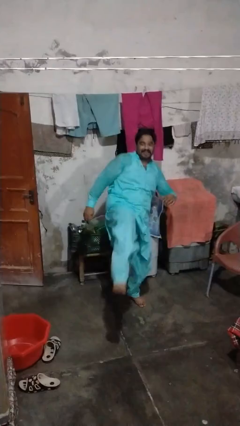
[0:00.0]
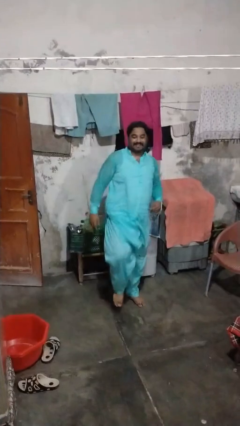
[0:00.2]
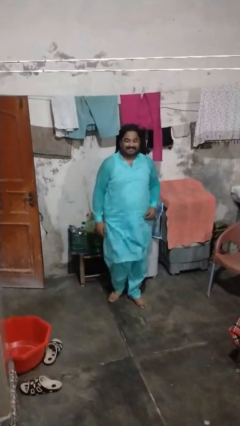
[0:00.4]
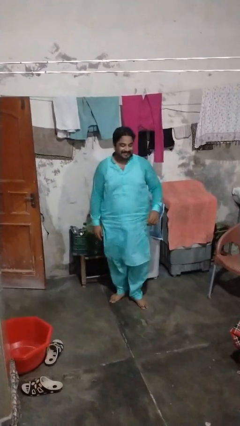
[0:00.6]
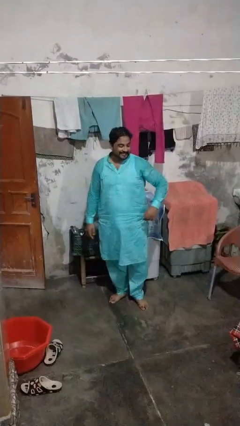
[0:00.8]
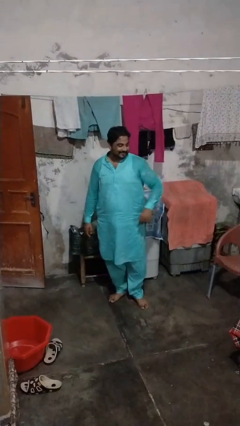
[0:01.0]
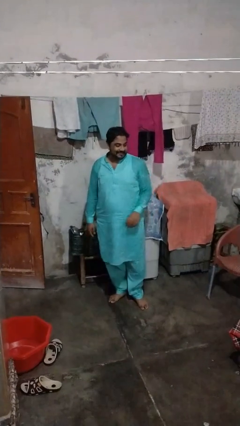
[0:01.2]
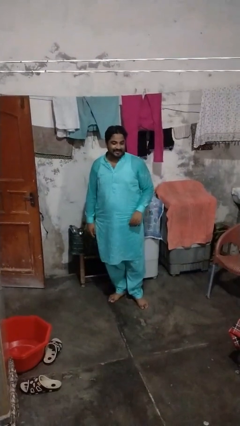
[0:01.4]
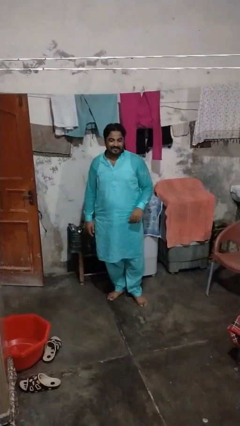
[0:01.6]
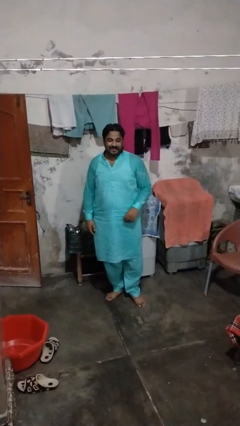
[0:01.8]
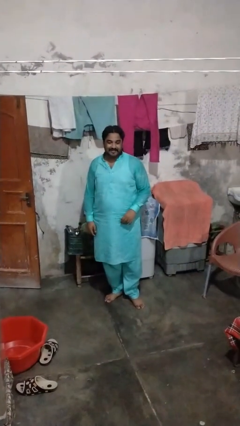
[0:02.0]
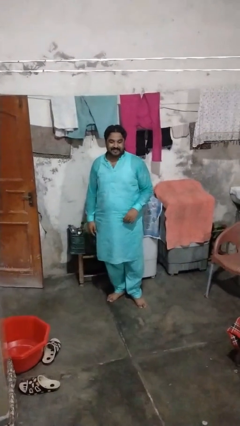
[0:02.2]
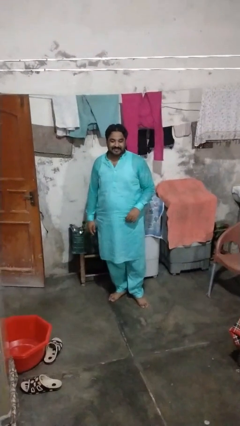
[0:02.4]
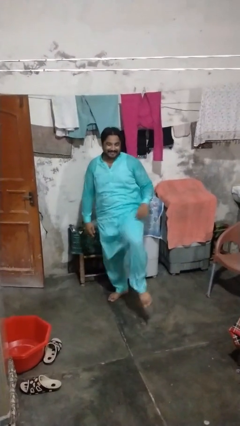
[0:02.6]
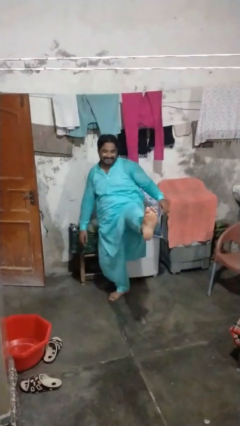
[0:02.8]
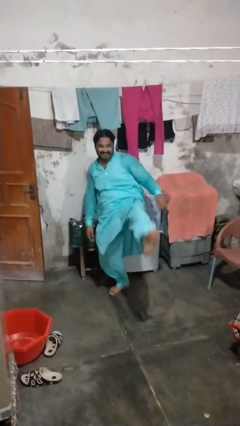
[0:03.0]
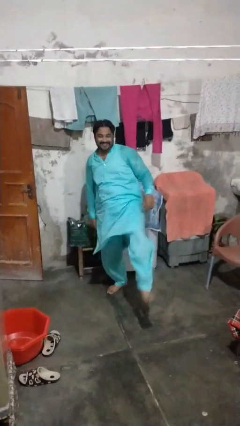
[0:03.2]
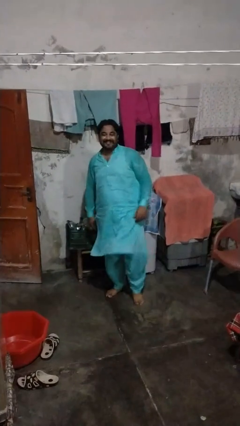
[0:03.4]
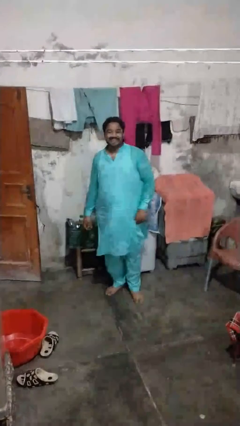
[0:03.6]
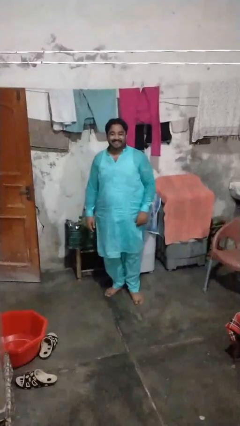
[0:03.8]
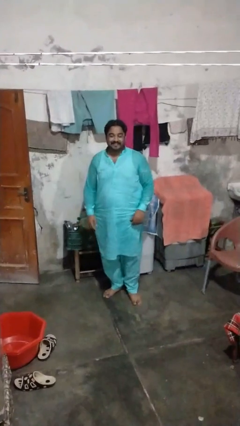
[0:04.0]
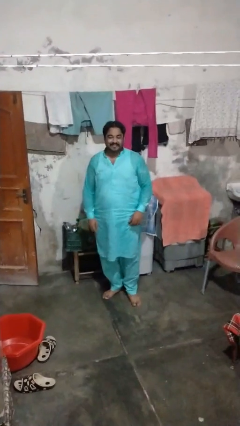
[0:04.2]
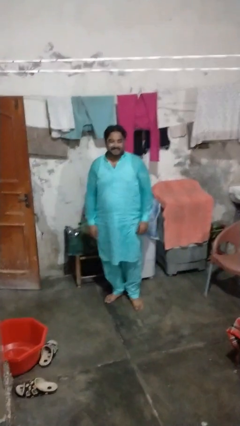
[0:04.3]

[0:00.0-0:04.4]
person karate kicks

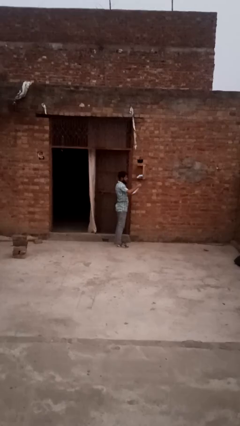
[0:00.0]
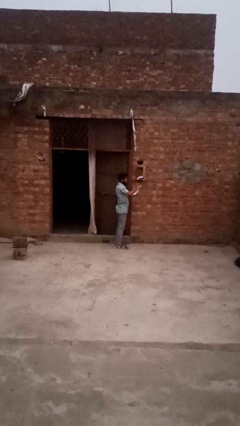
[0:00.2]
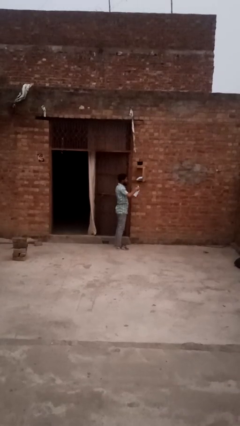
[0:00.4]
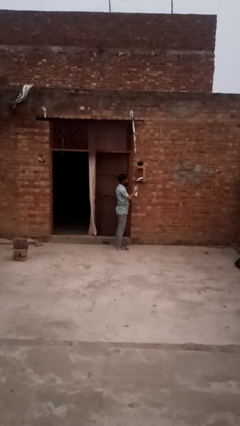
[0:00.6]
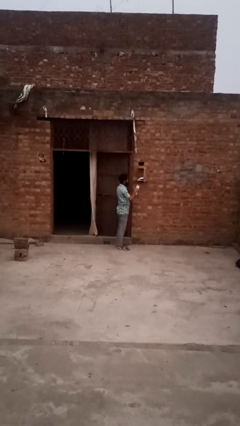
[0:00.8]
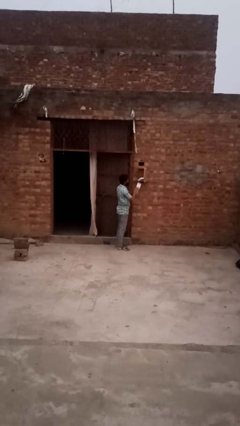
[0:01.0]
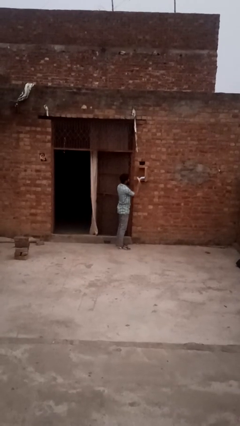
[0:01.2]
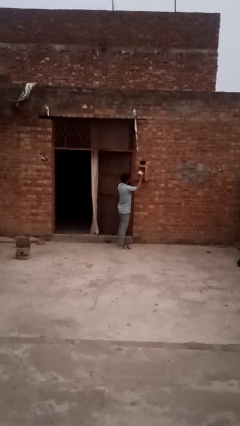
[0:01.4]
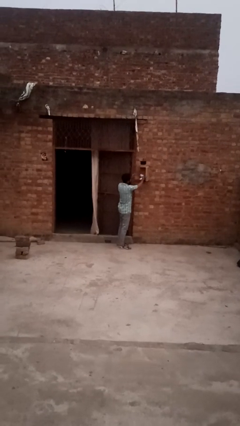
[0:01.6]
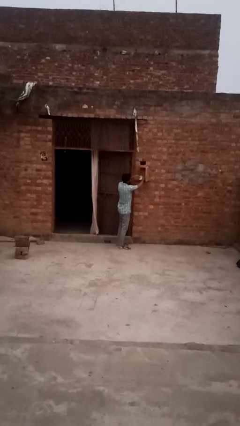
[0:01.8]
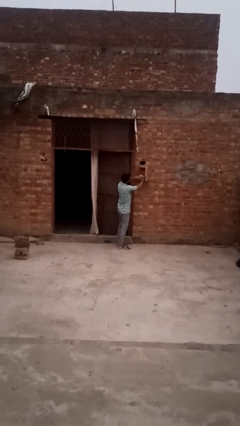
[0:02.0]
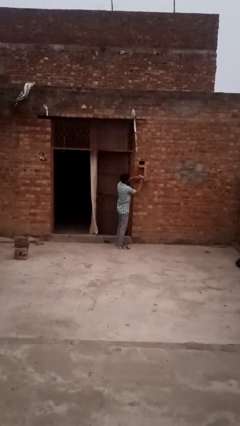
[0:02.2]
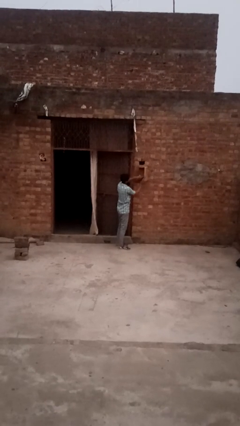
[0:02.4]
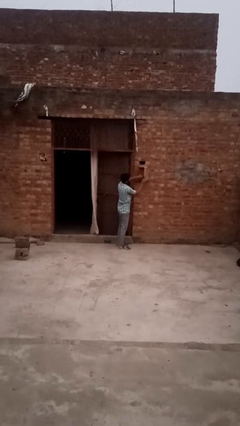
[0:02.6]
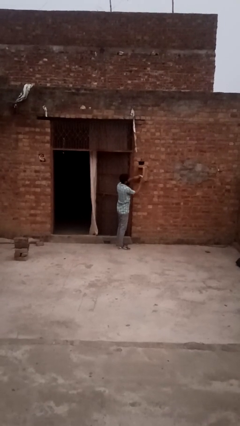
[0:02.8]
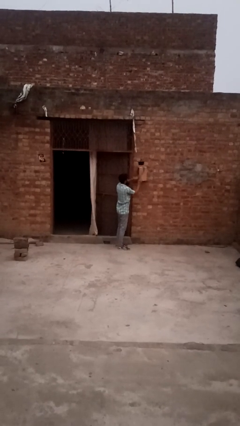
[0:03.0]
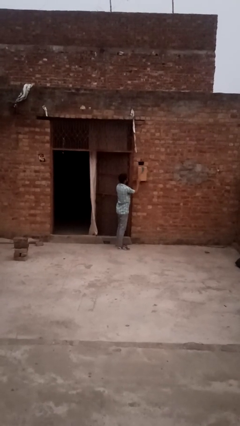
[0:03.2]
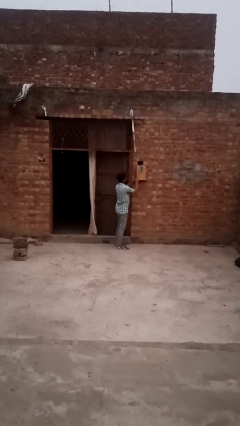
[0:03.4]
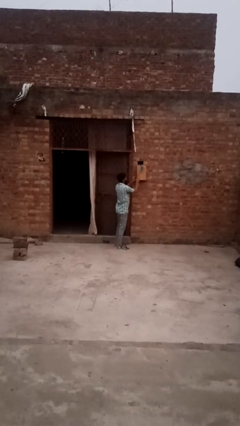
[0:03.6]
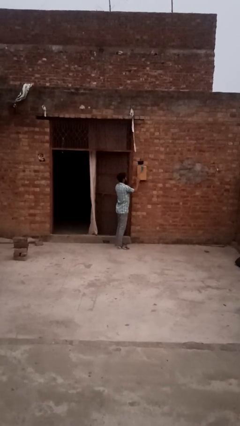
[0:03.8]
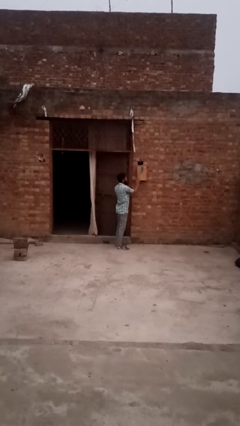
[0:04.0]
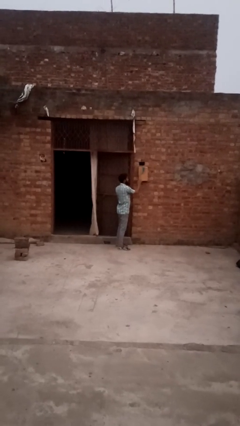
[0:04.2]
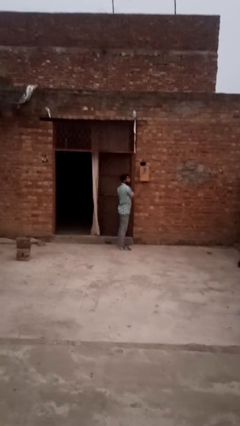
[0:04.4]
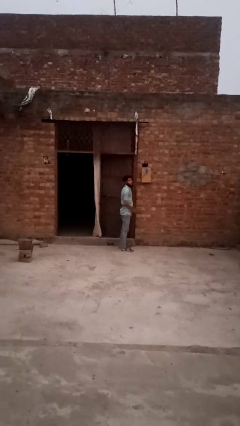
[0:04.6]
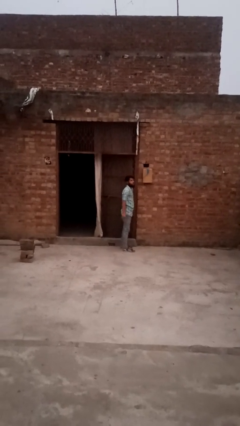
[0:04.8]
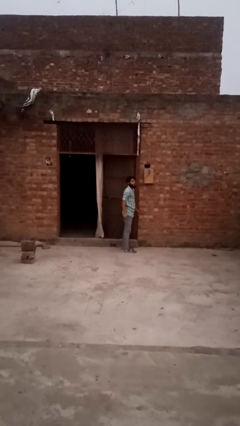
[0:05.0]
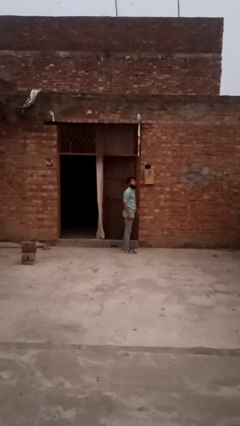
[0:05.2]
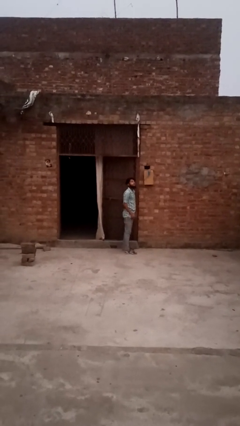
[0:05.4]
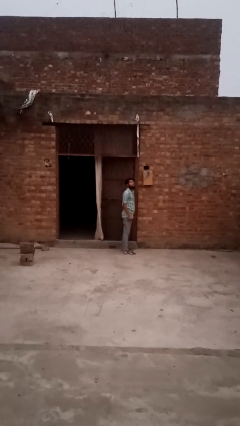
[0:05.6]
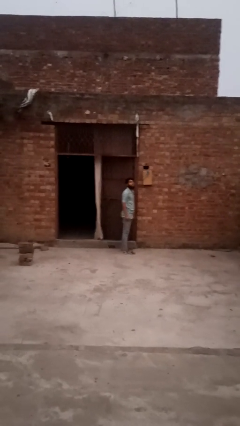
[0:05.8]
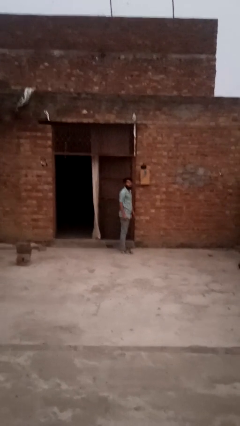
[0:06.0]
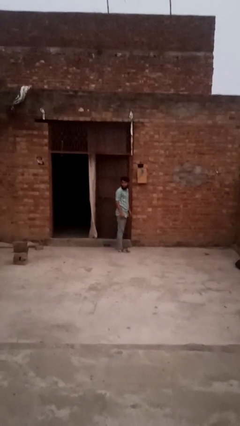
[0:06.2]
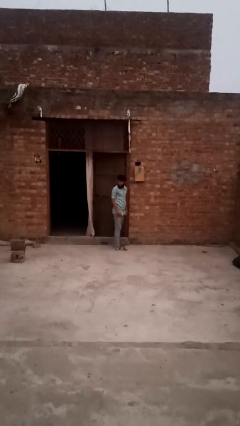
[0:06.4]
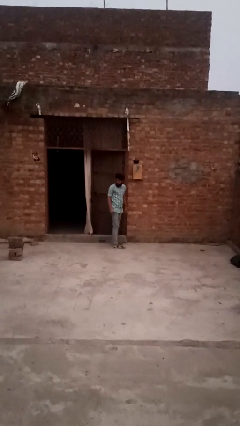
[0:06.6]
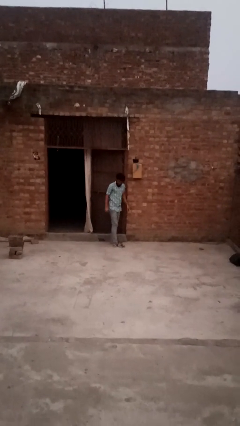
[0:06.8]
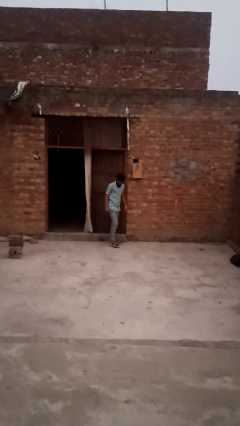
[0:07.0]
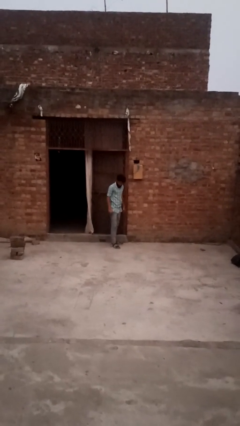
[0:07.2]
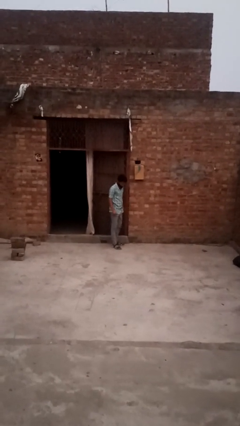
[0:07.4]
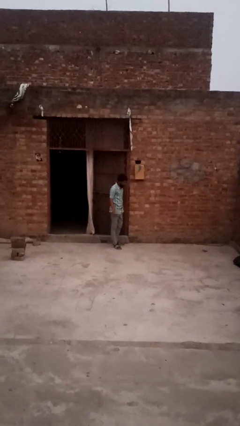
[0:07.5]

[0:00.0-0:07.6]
person takes letters from mailbox

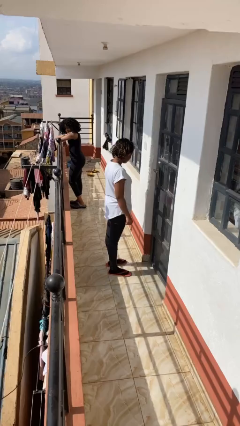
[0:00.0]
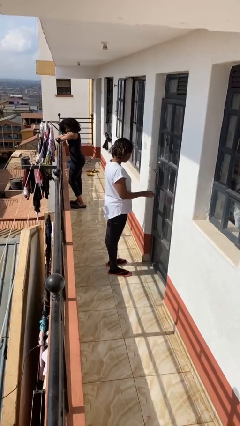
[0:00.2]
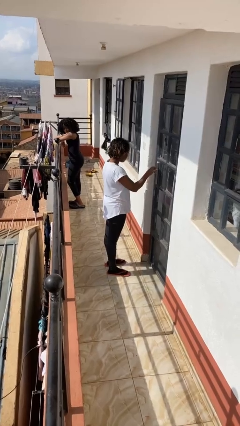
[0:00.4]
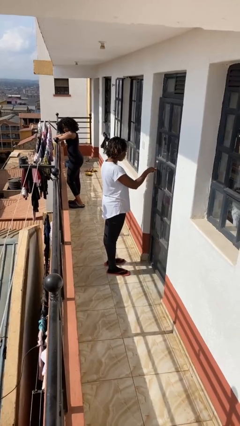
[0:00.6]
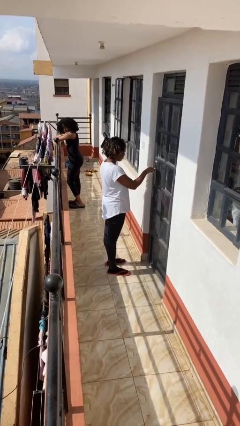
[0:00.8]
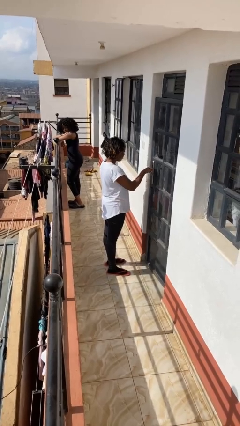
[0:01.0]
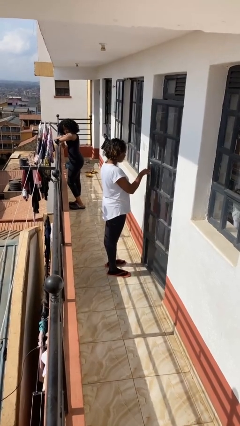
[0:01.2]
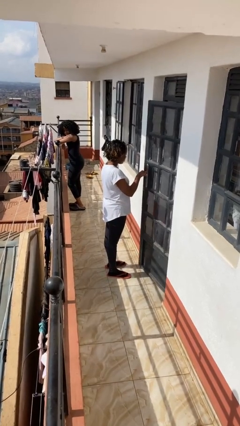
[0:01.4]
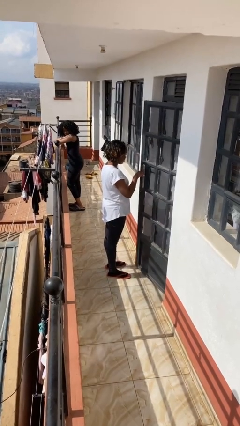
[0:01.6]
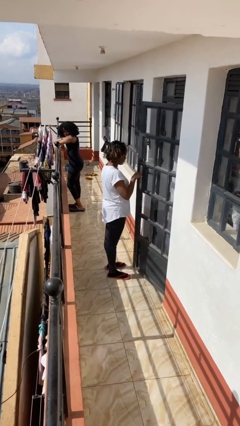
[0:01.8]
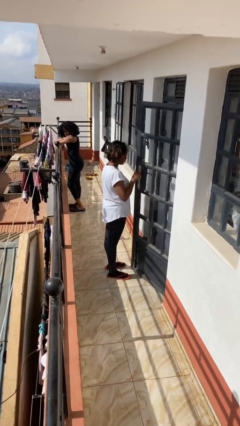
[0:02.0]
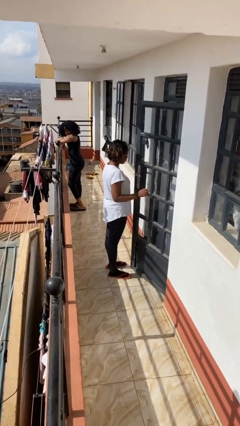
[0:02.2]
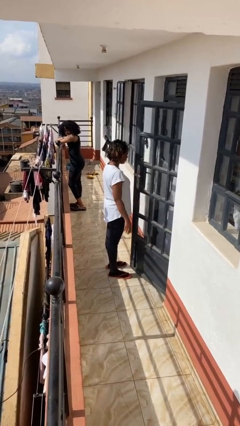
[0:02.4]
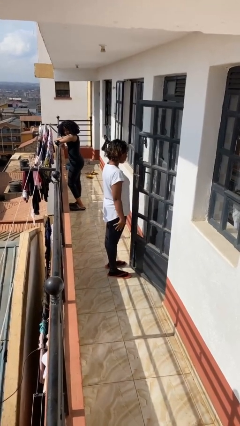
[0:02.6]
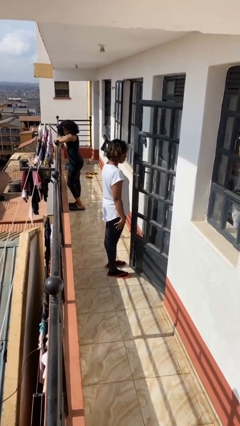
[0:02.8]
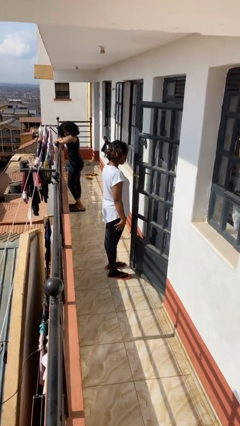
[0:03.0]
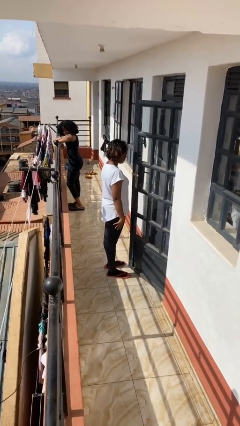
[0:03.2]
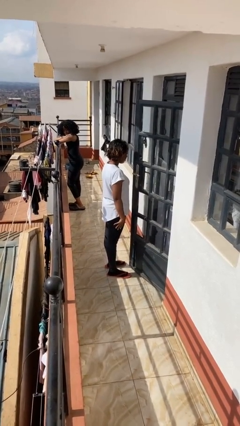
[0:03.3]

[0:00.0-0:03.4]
person opens facility door

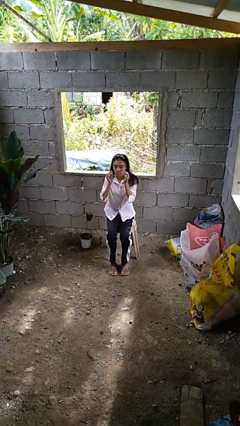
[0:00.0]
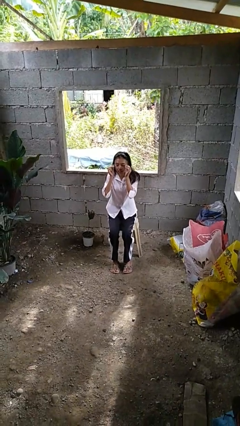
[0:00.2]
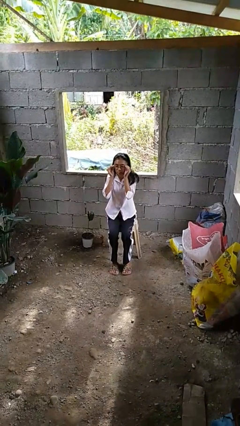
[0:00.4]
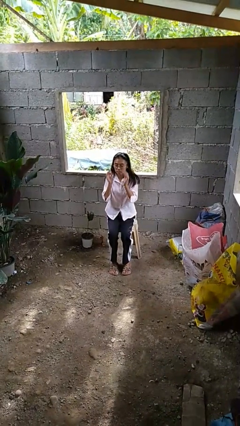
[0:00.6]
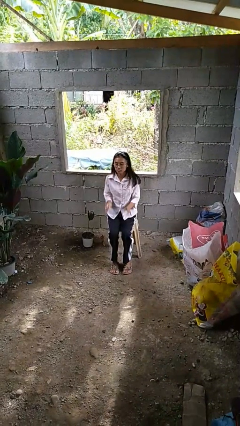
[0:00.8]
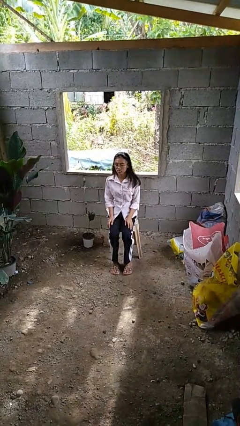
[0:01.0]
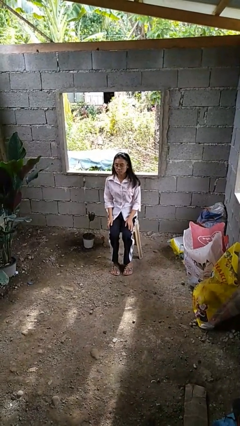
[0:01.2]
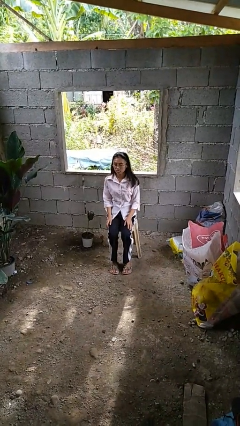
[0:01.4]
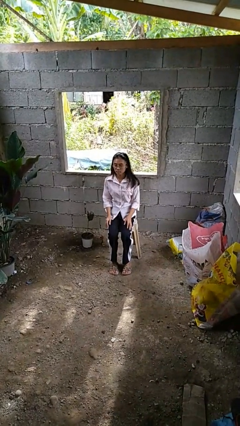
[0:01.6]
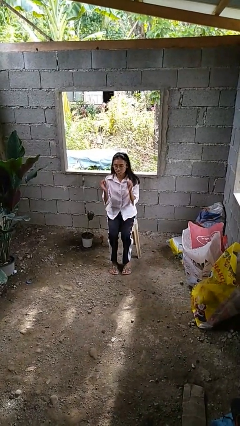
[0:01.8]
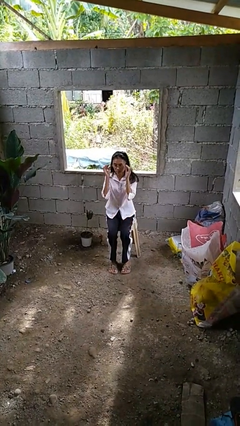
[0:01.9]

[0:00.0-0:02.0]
person puts on glasses
